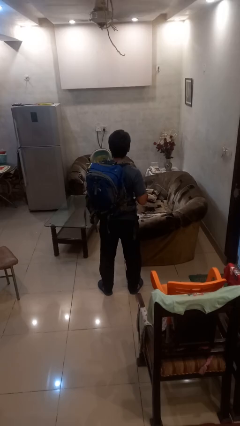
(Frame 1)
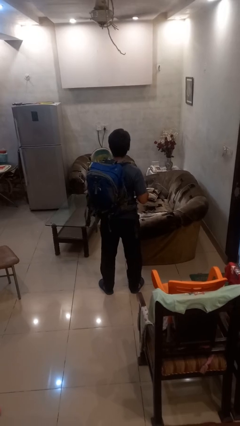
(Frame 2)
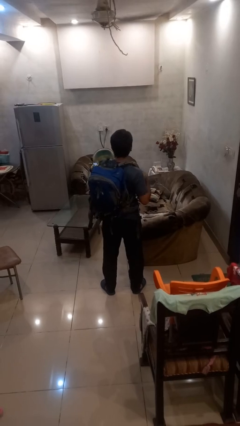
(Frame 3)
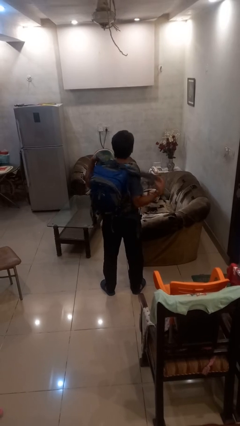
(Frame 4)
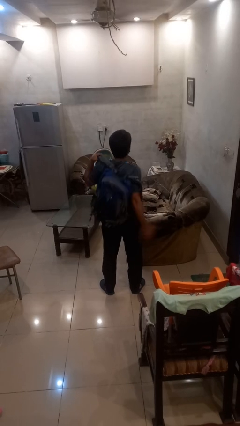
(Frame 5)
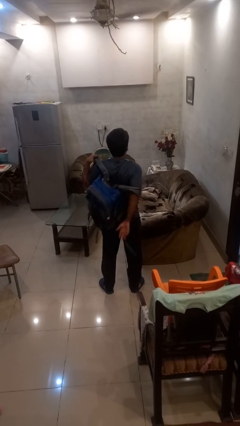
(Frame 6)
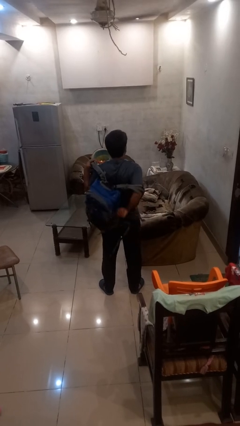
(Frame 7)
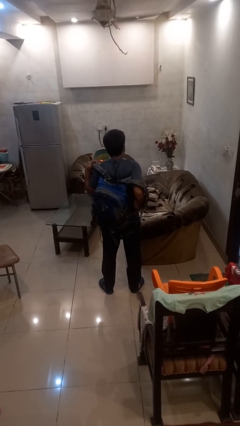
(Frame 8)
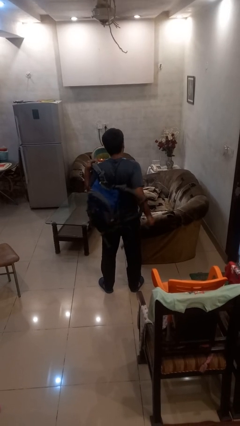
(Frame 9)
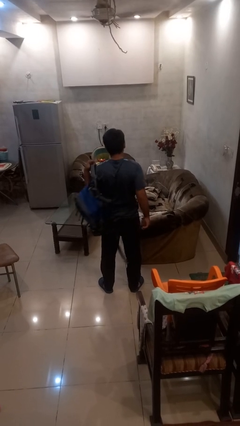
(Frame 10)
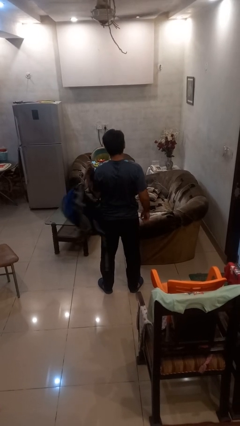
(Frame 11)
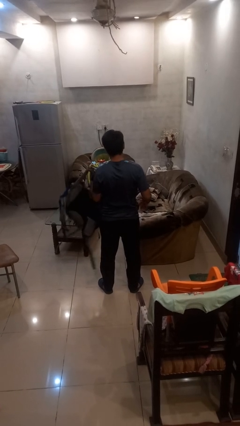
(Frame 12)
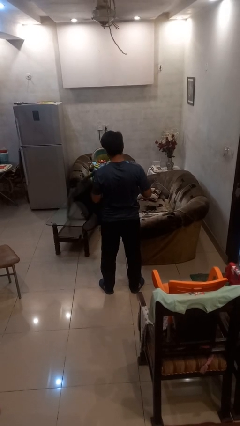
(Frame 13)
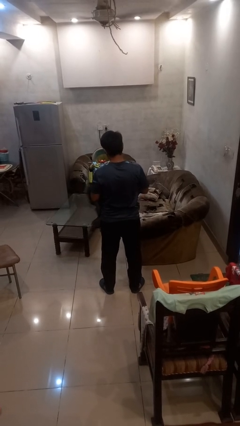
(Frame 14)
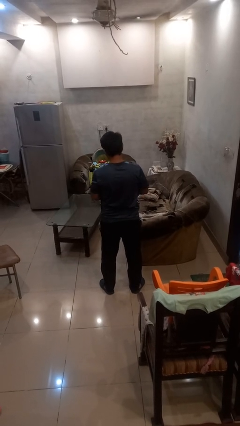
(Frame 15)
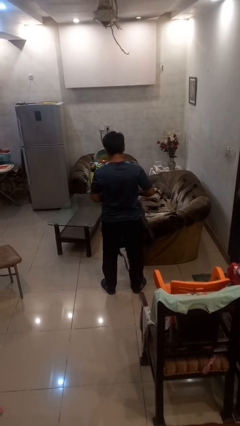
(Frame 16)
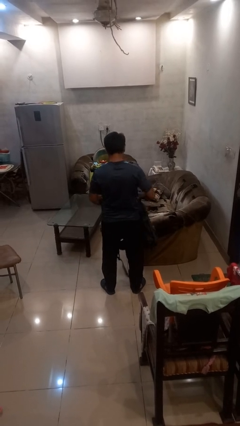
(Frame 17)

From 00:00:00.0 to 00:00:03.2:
person takes off backpack

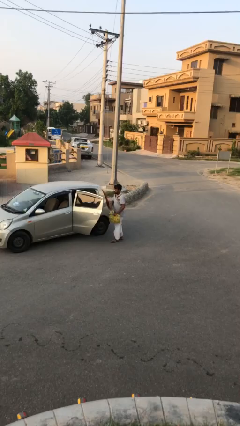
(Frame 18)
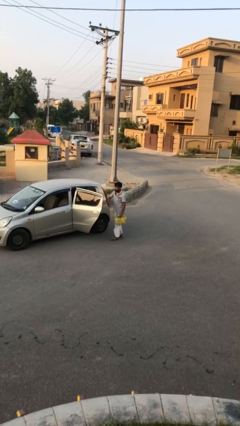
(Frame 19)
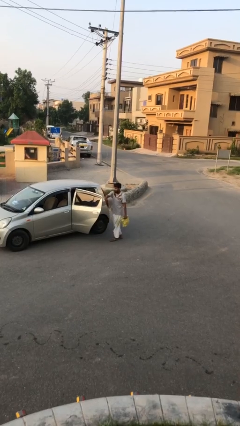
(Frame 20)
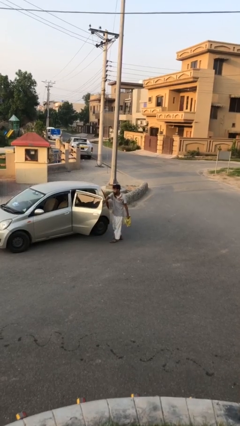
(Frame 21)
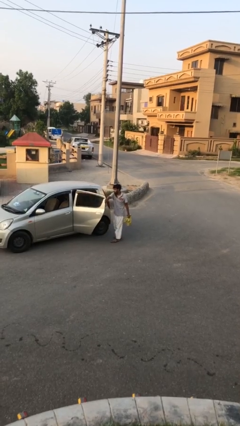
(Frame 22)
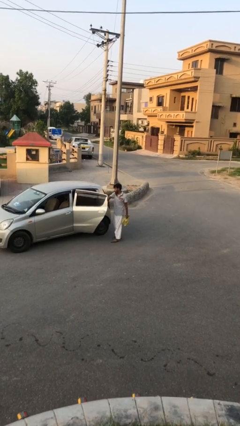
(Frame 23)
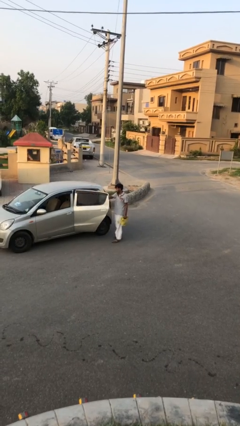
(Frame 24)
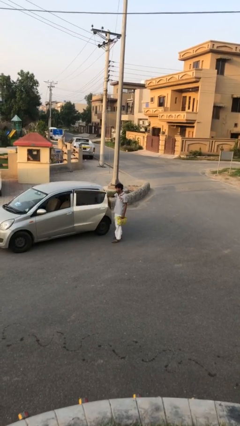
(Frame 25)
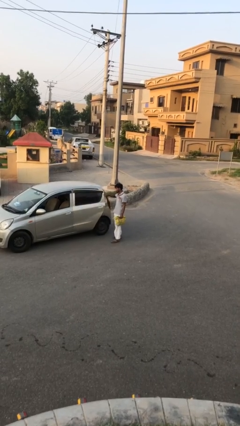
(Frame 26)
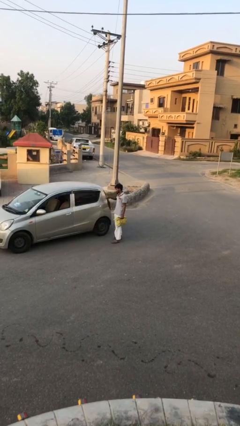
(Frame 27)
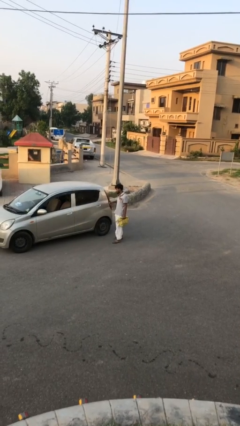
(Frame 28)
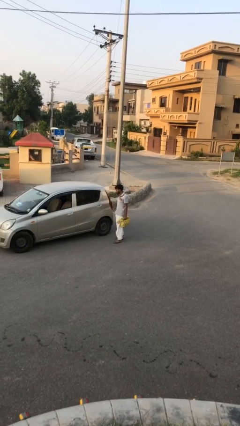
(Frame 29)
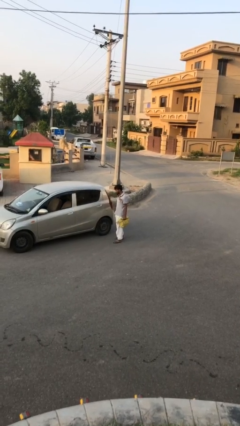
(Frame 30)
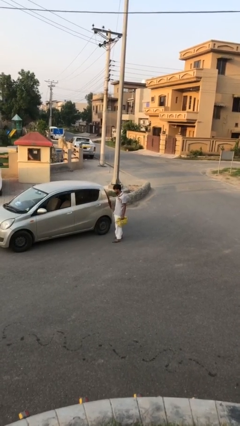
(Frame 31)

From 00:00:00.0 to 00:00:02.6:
person closes car door

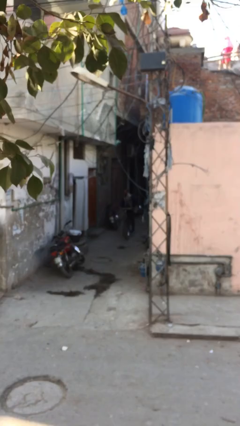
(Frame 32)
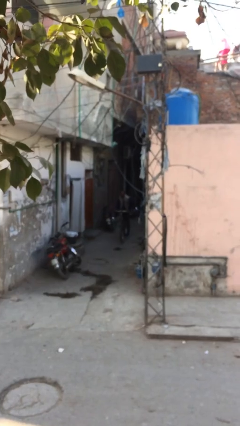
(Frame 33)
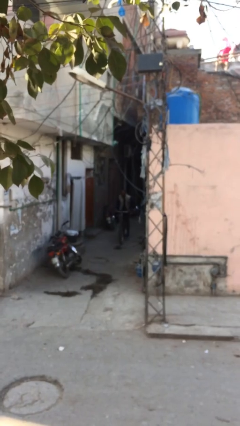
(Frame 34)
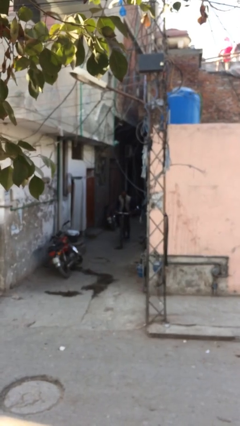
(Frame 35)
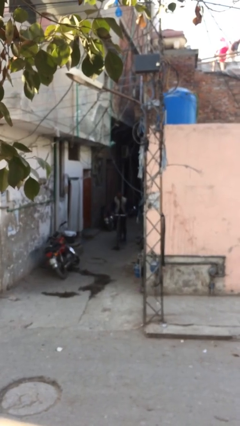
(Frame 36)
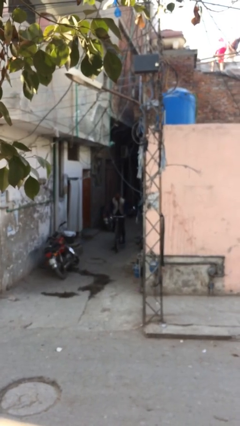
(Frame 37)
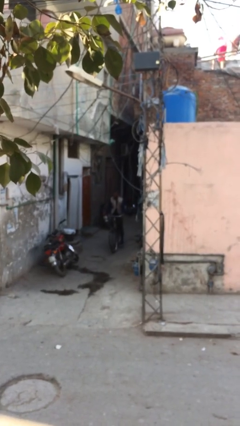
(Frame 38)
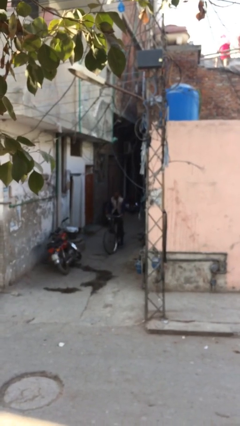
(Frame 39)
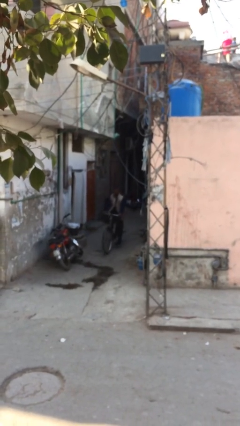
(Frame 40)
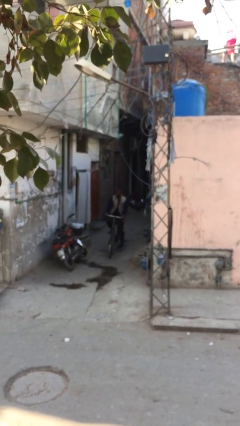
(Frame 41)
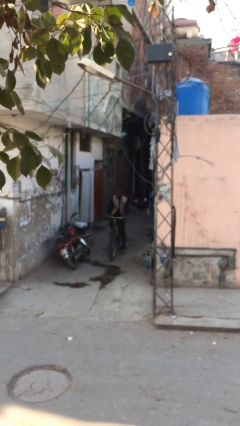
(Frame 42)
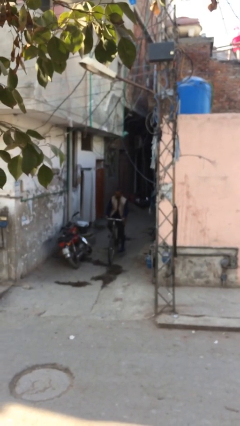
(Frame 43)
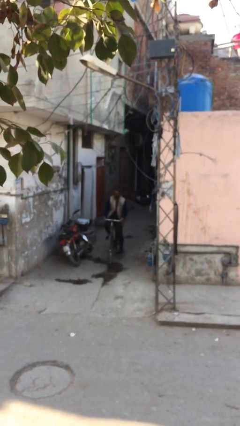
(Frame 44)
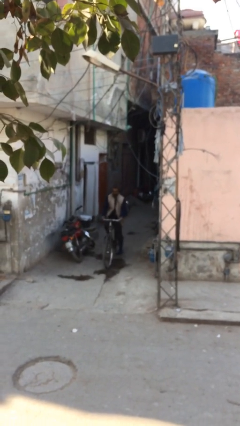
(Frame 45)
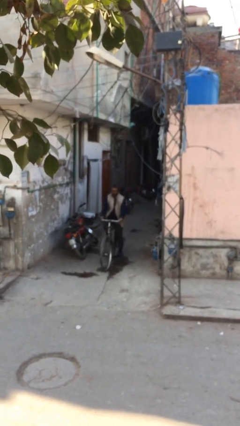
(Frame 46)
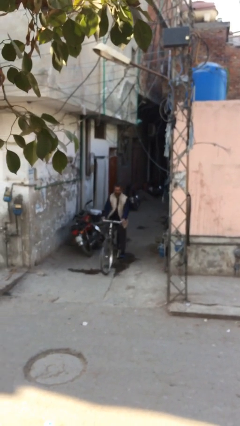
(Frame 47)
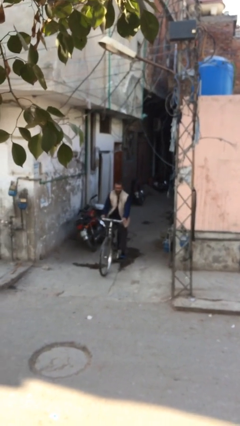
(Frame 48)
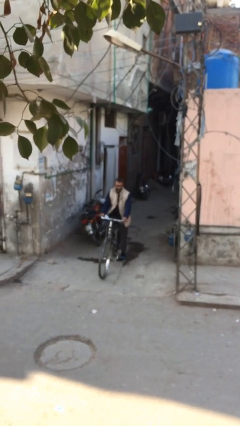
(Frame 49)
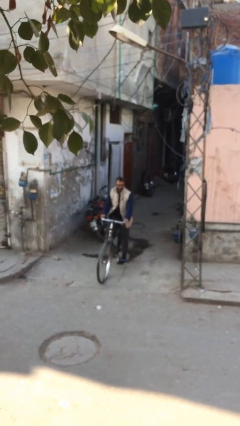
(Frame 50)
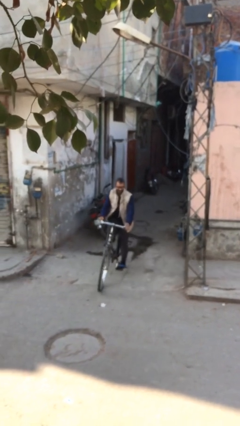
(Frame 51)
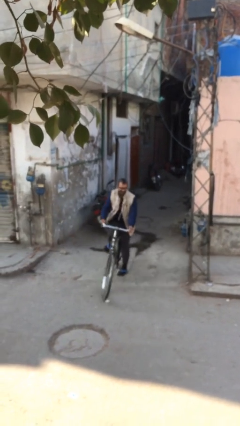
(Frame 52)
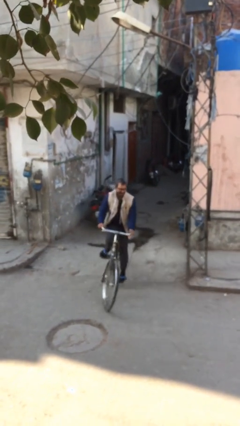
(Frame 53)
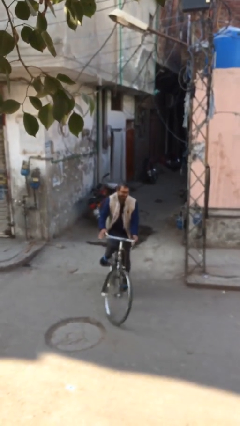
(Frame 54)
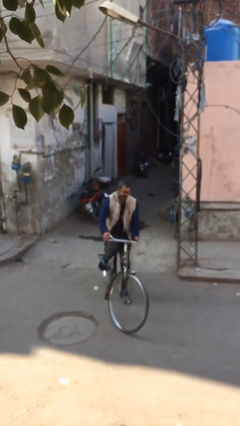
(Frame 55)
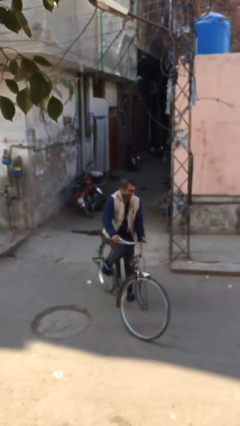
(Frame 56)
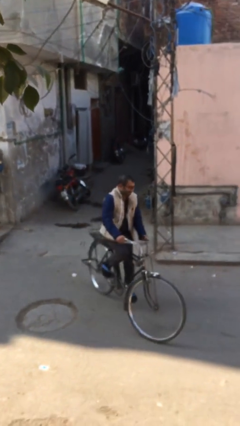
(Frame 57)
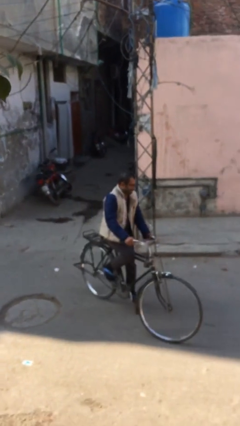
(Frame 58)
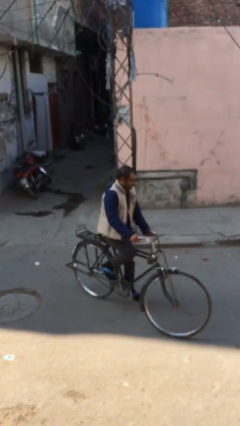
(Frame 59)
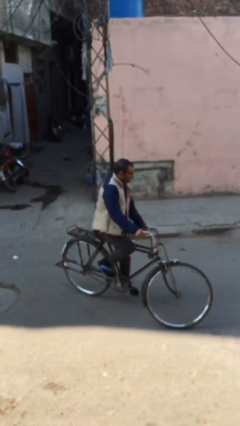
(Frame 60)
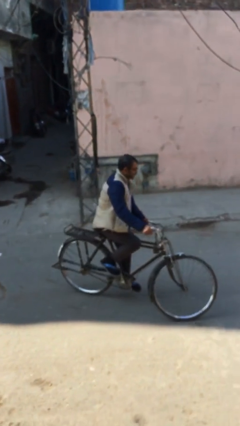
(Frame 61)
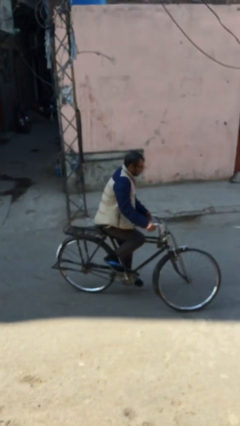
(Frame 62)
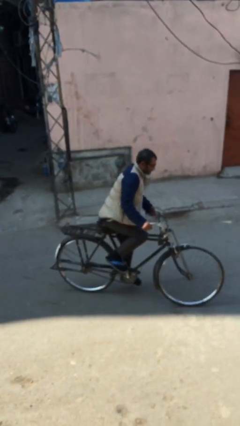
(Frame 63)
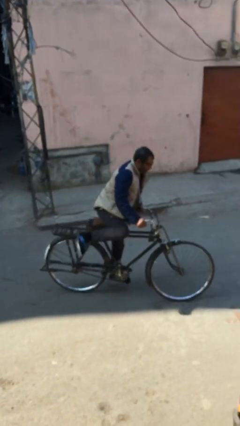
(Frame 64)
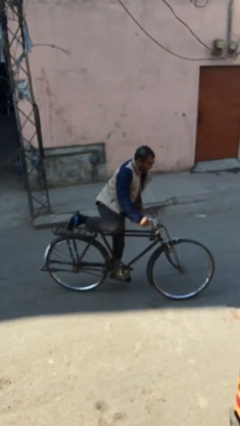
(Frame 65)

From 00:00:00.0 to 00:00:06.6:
person rides bicycle

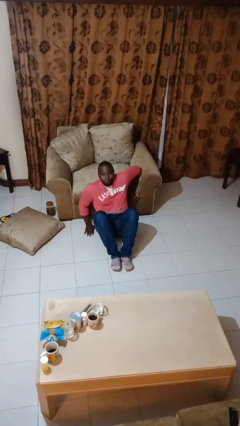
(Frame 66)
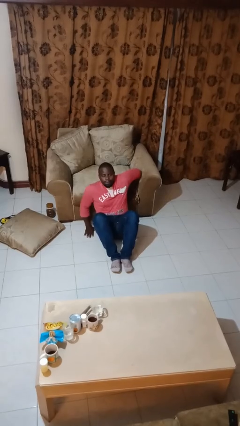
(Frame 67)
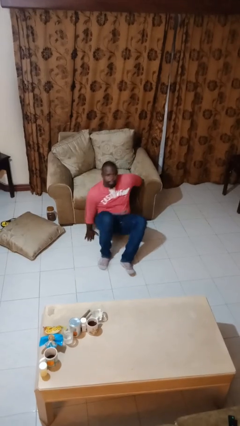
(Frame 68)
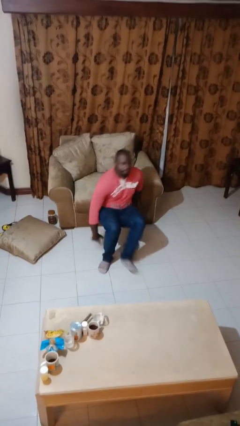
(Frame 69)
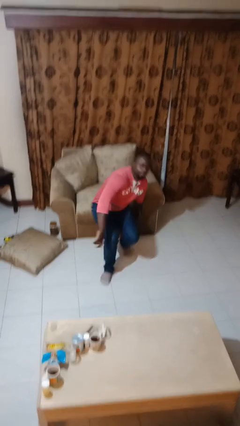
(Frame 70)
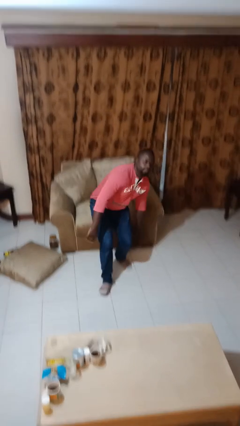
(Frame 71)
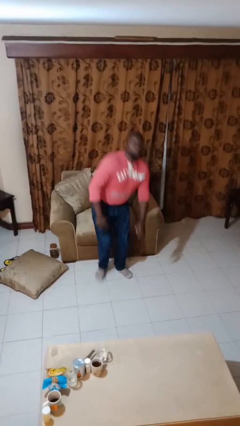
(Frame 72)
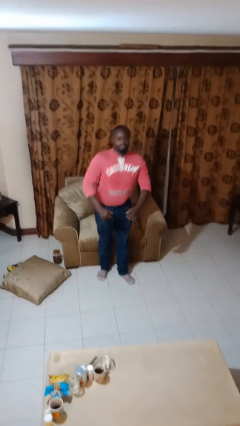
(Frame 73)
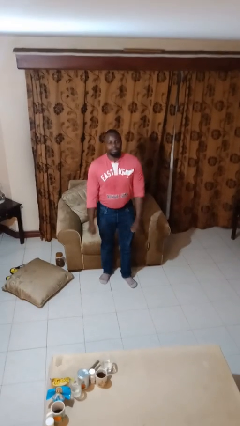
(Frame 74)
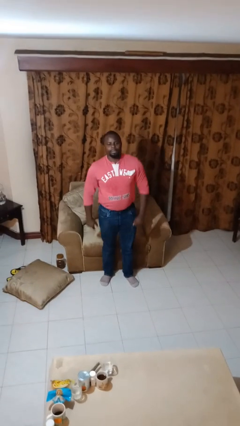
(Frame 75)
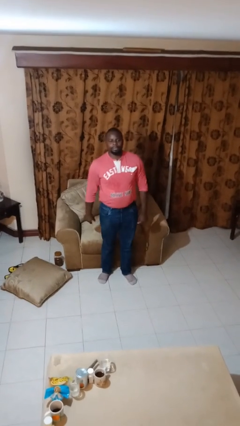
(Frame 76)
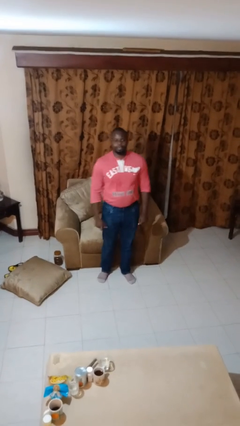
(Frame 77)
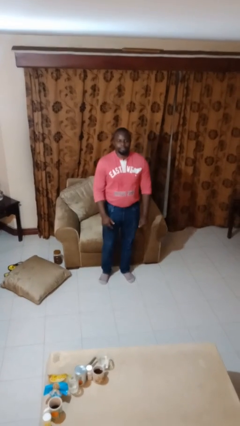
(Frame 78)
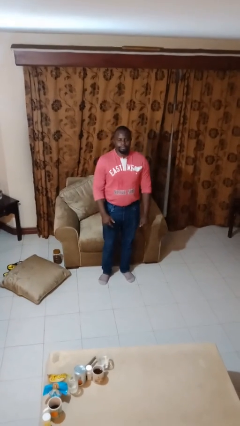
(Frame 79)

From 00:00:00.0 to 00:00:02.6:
person stands up from floor

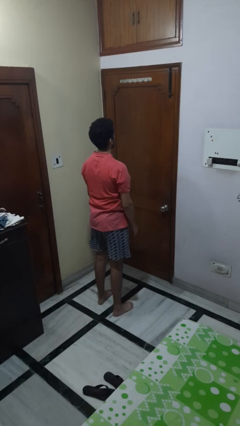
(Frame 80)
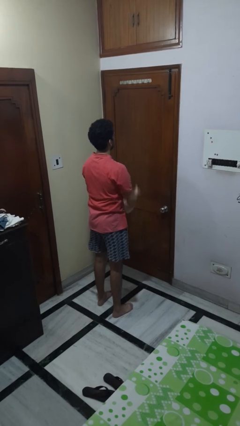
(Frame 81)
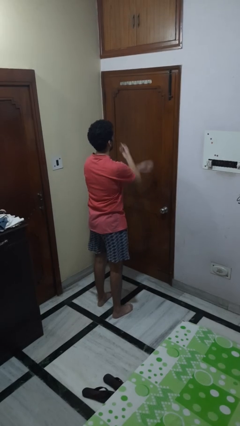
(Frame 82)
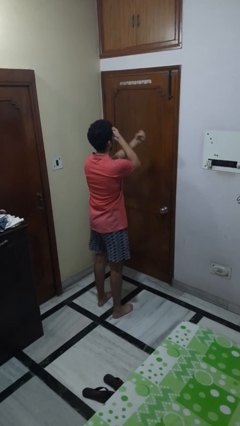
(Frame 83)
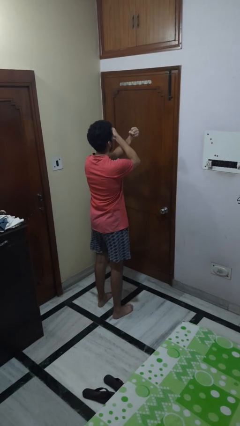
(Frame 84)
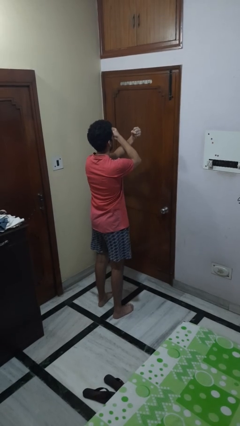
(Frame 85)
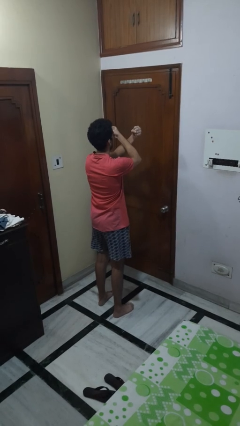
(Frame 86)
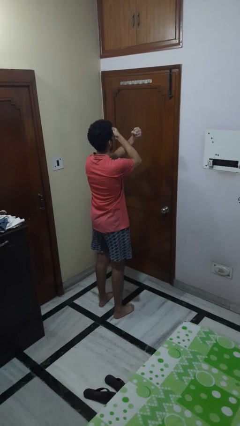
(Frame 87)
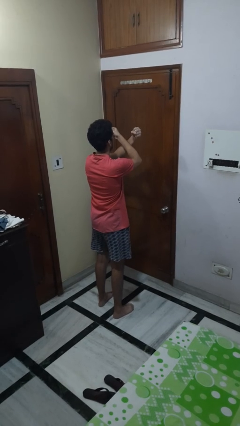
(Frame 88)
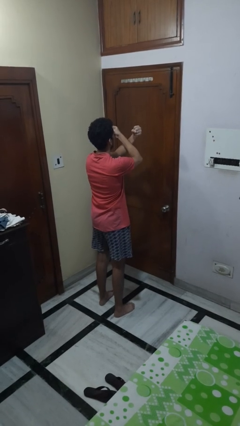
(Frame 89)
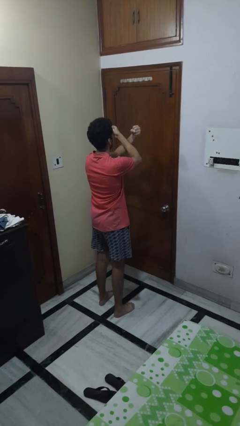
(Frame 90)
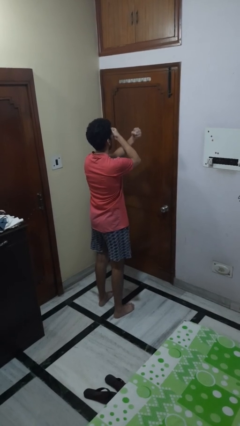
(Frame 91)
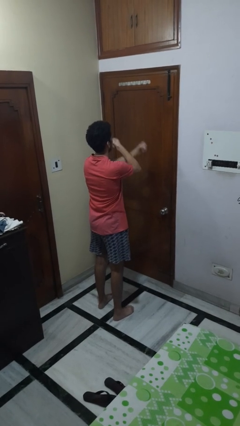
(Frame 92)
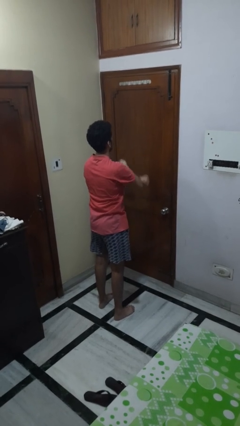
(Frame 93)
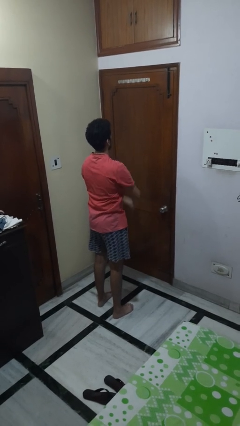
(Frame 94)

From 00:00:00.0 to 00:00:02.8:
person gestures arms x
